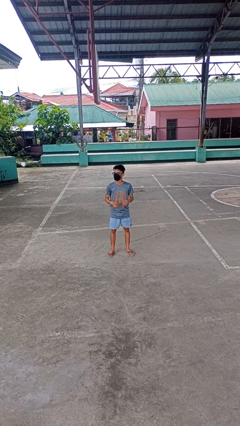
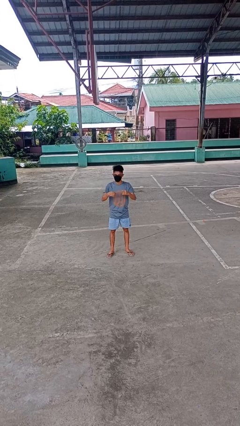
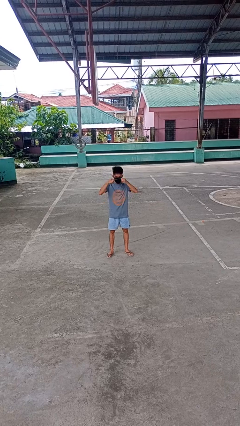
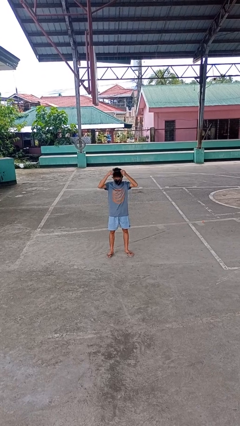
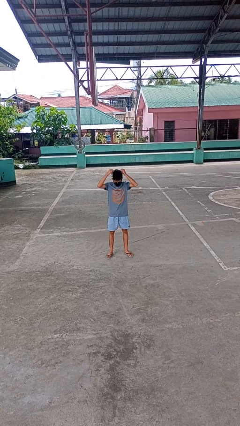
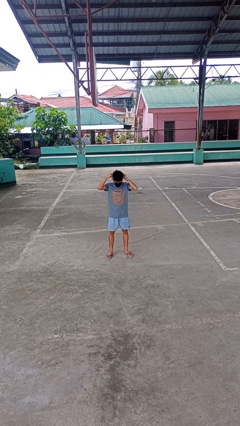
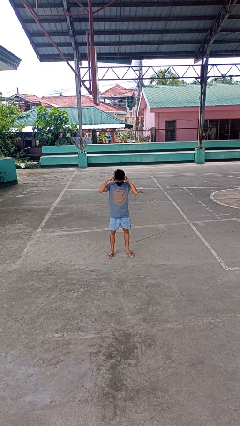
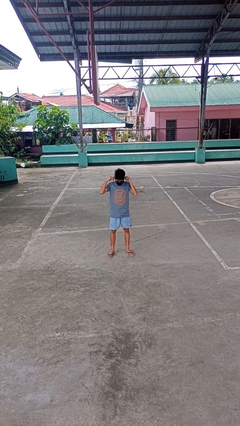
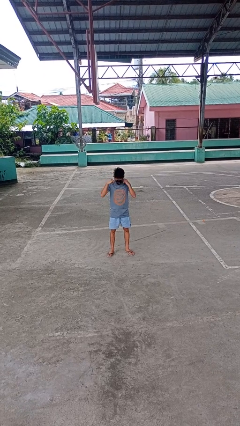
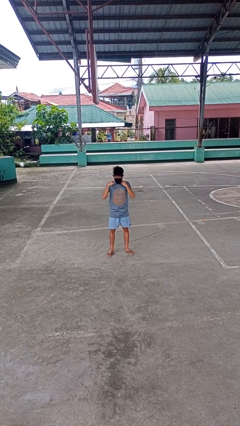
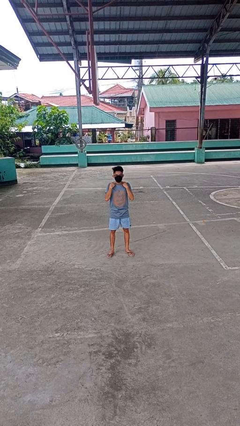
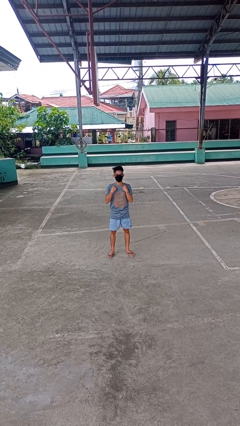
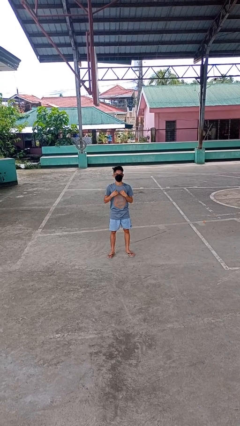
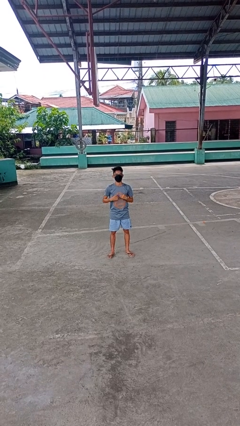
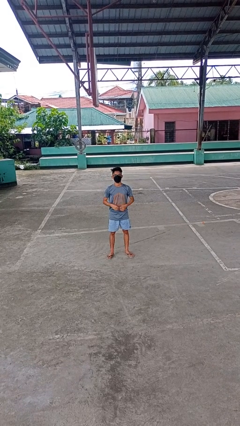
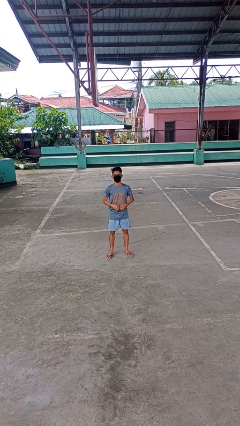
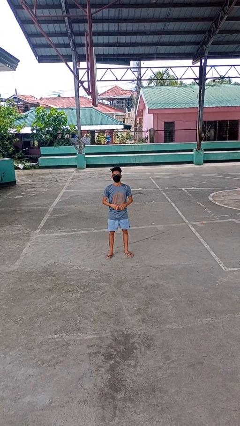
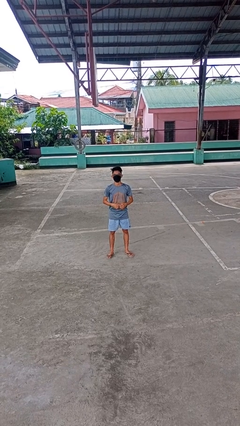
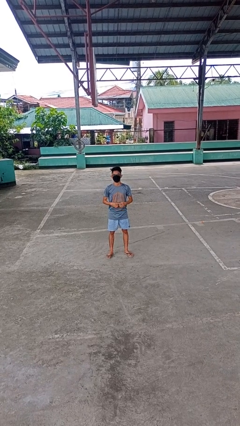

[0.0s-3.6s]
person puts on necklace

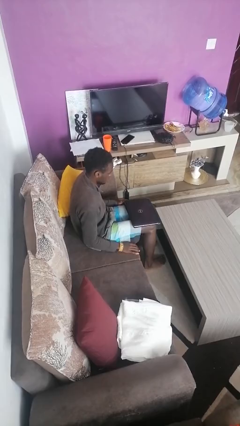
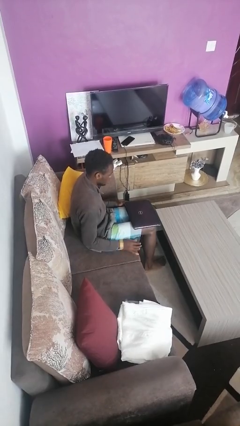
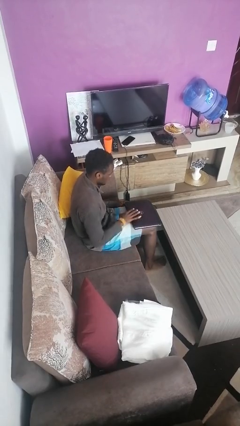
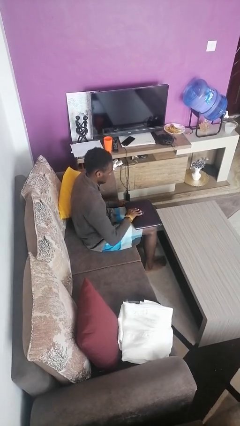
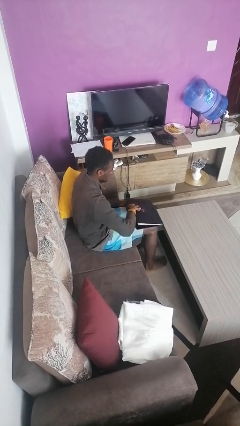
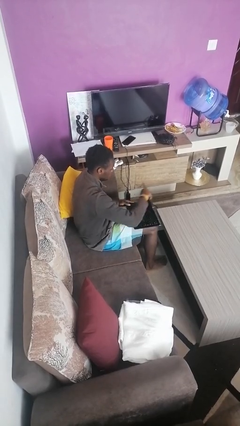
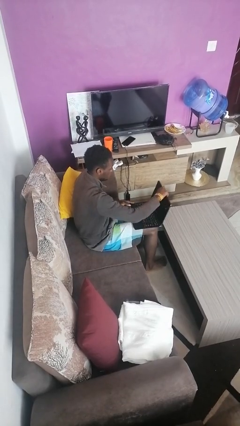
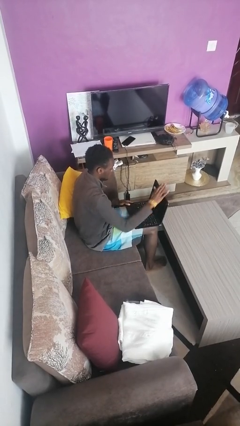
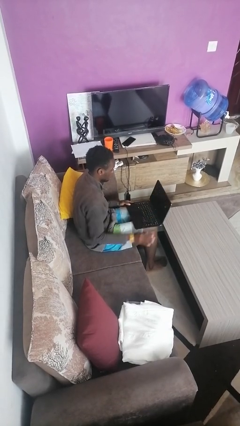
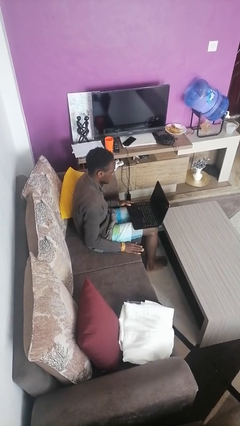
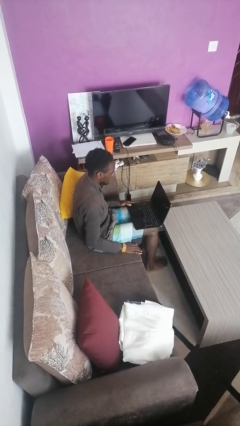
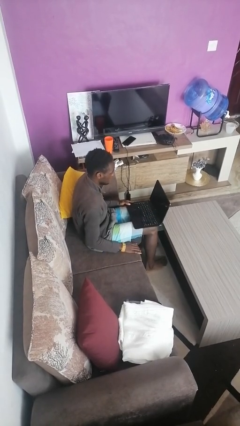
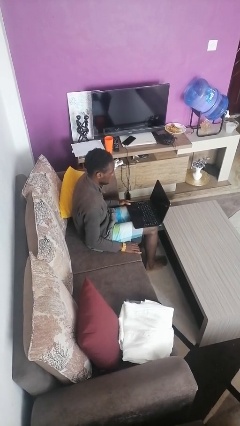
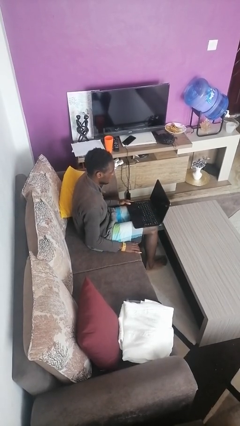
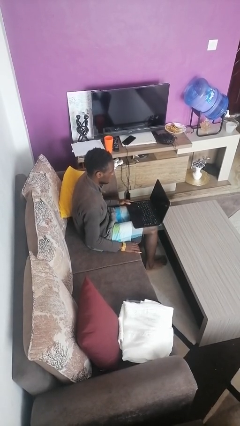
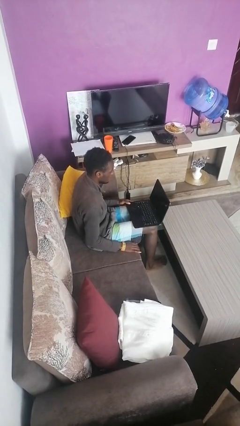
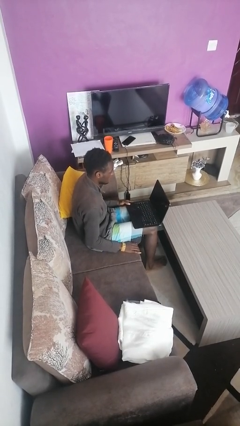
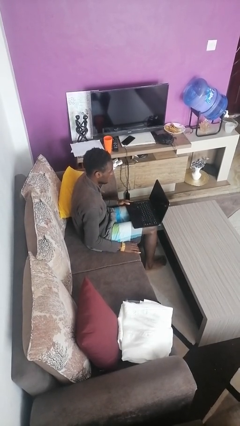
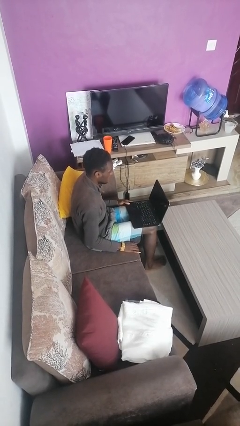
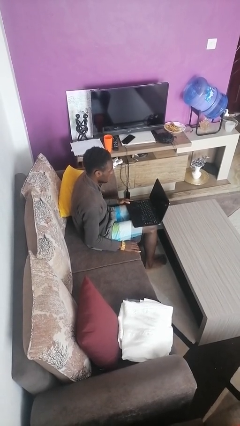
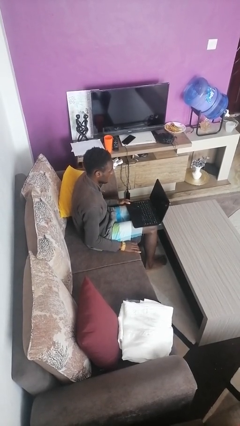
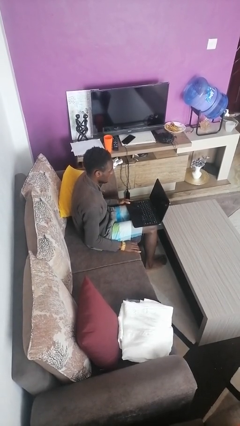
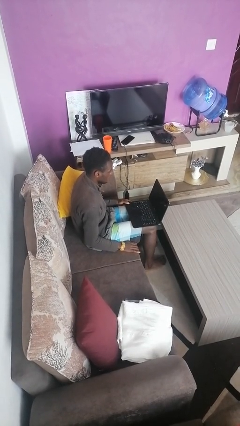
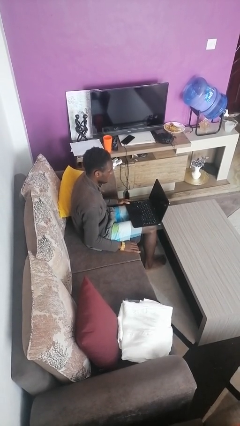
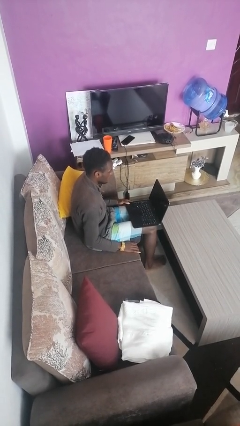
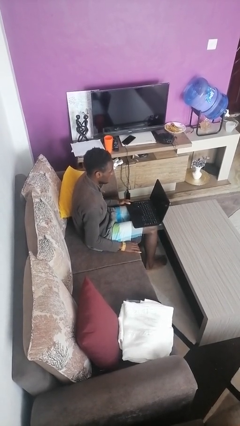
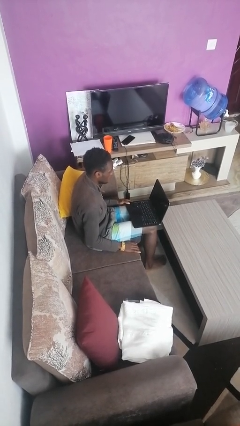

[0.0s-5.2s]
person opens laptop

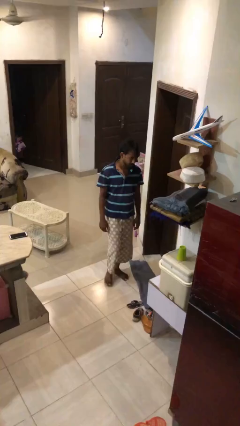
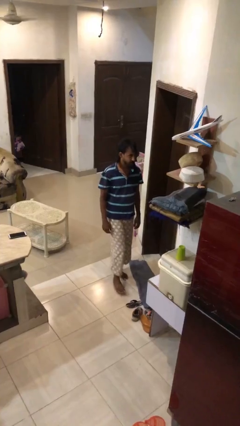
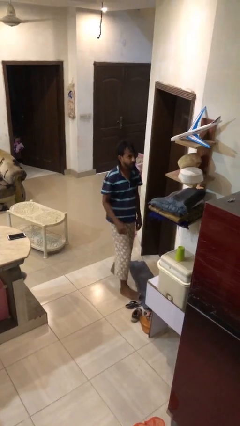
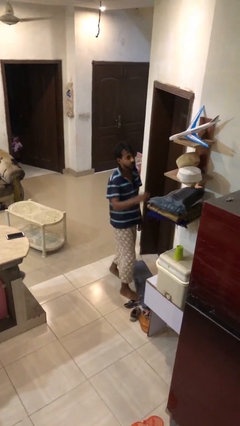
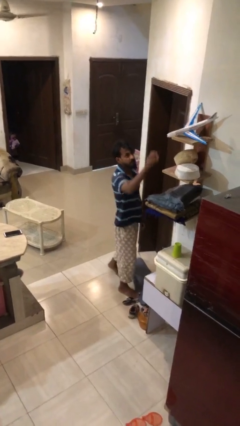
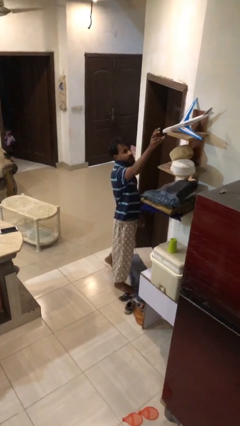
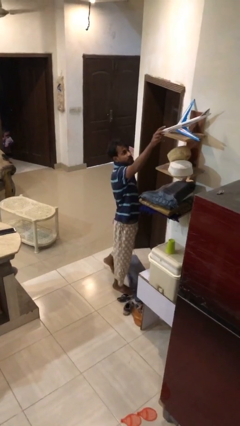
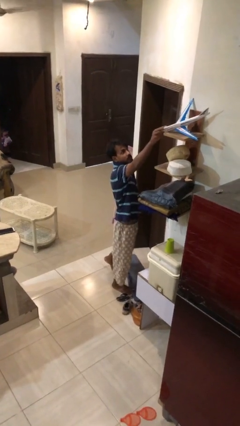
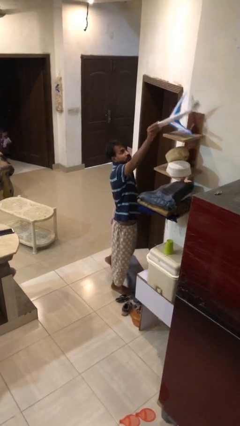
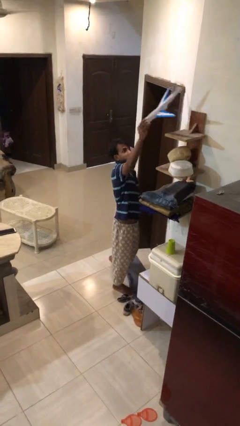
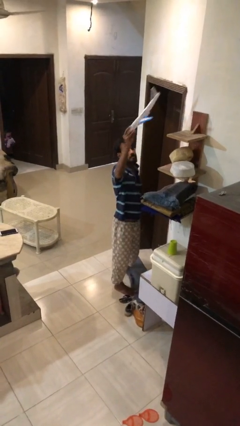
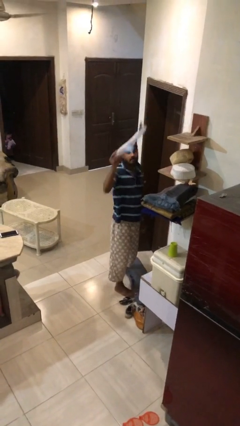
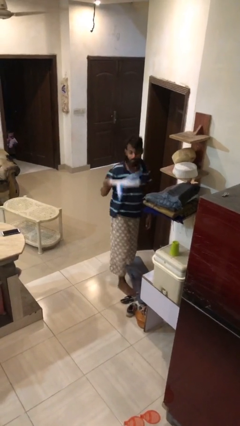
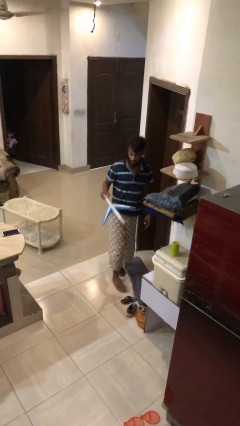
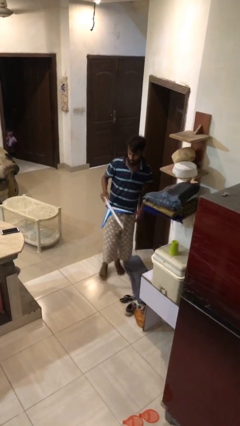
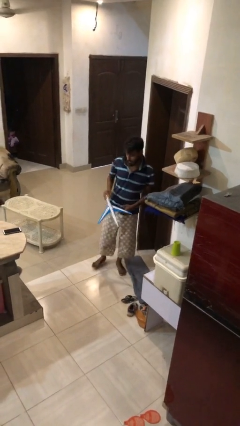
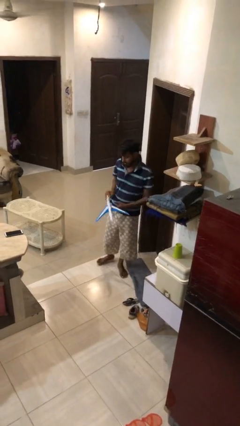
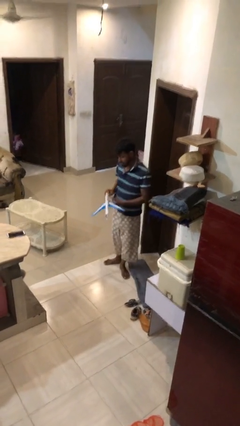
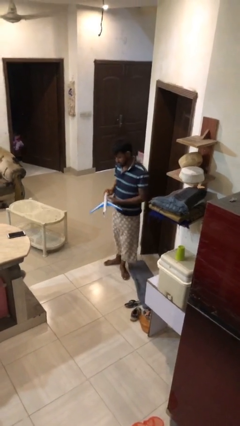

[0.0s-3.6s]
person picks up object from shelf

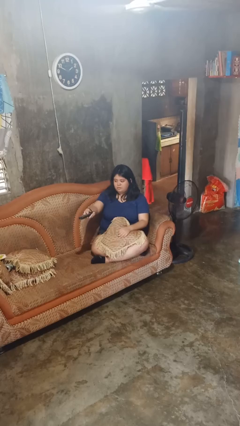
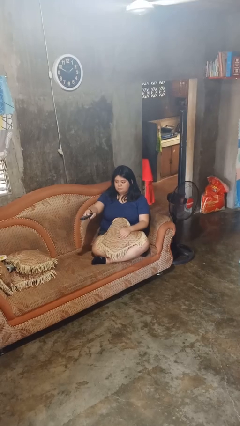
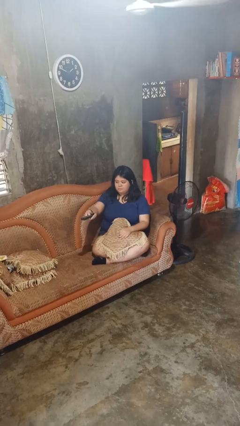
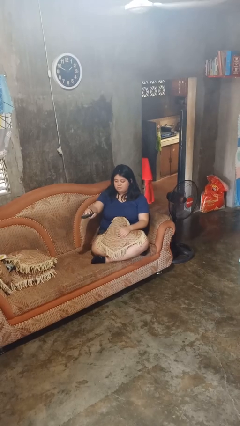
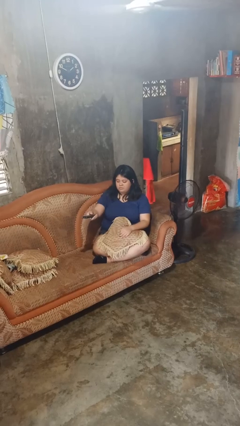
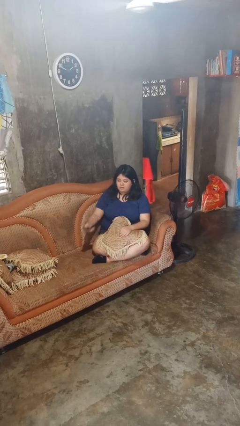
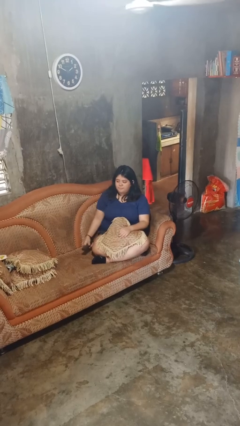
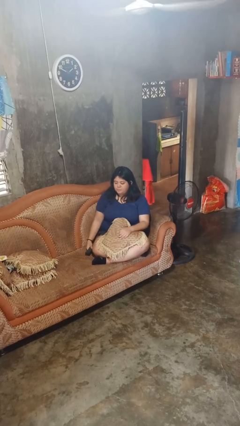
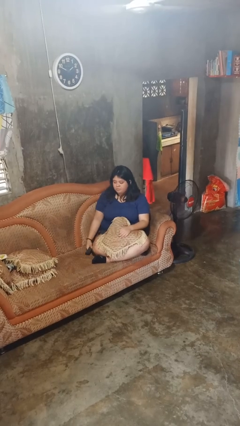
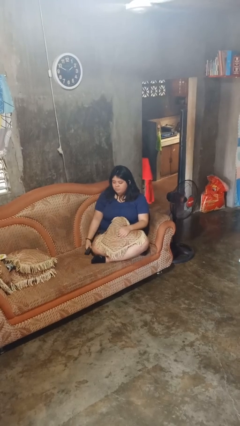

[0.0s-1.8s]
person uses television remote

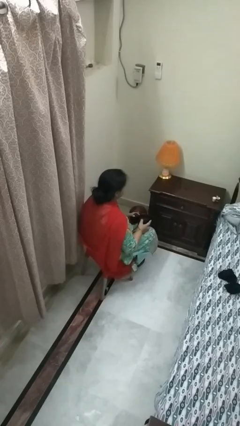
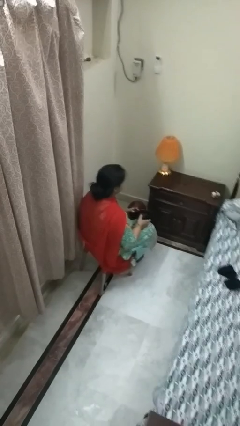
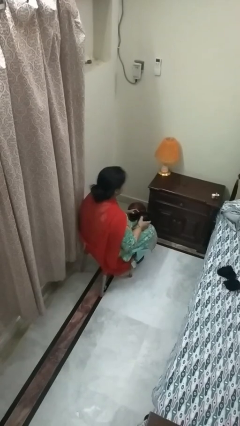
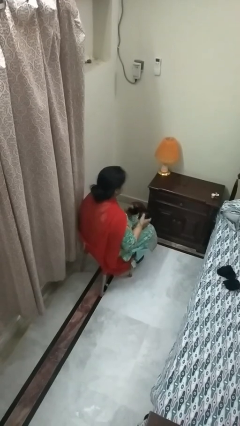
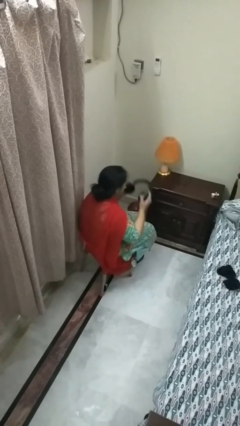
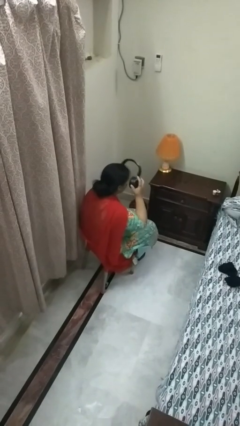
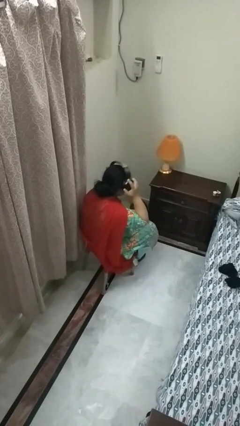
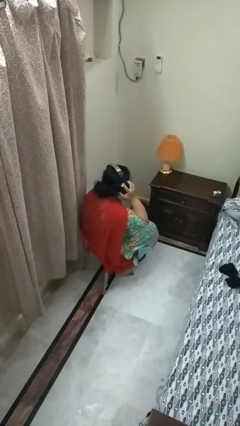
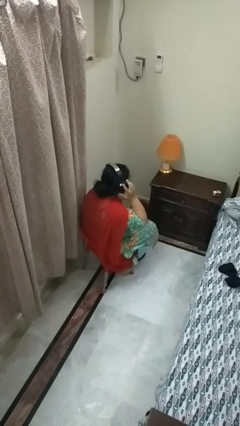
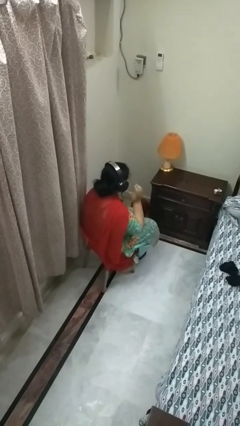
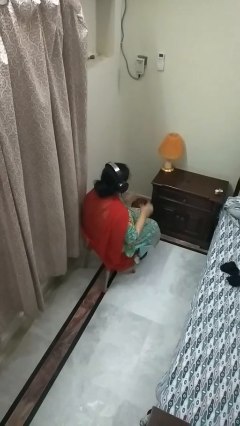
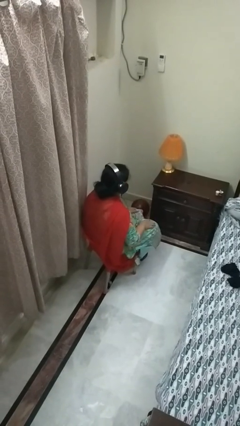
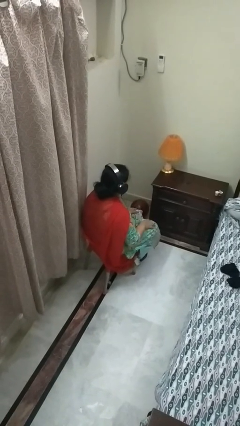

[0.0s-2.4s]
person puts on headphones

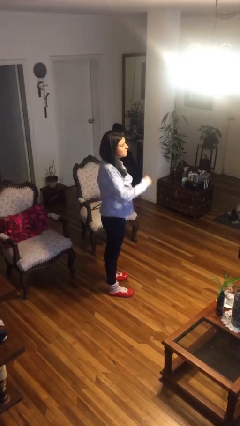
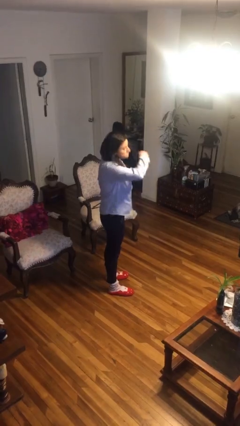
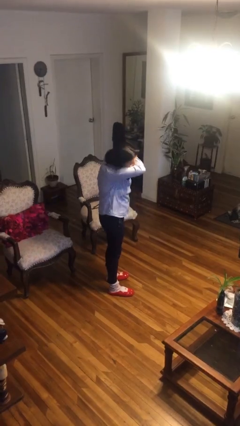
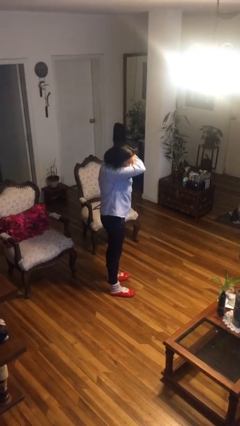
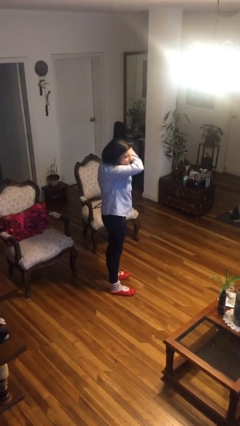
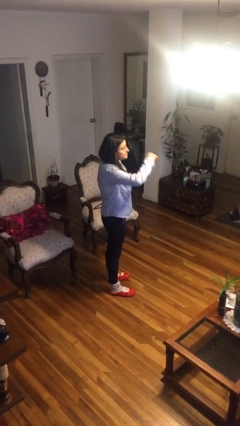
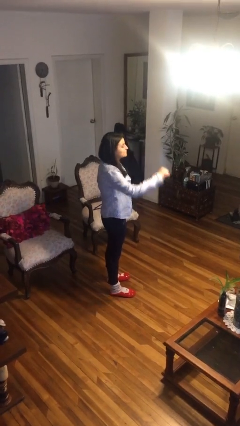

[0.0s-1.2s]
person sneezes into arm
